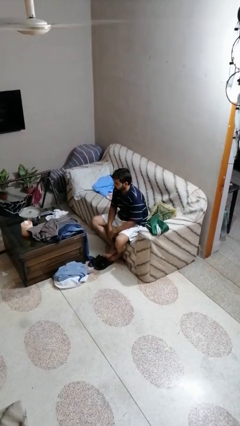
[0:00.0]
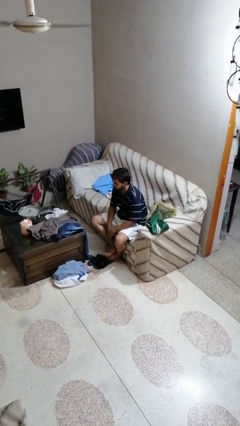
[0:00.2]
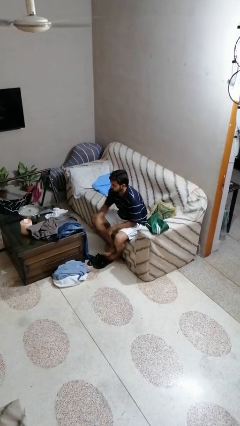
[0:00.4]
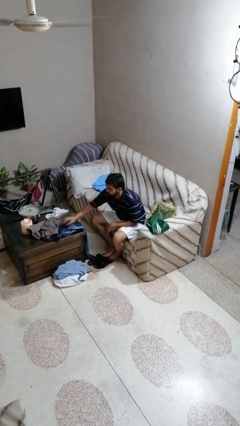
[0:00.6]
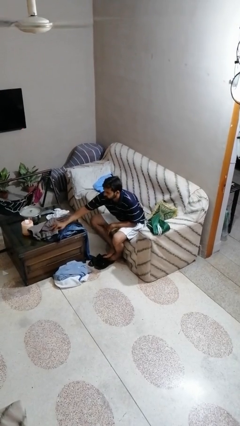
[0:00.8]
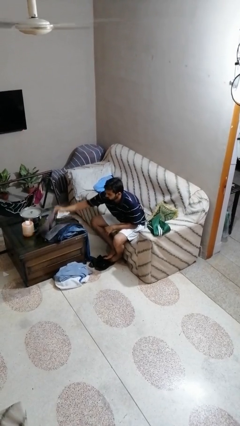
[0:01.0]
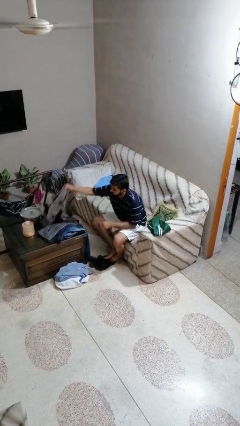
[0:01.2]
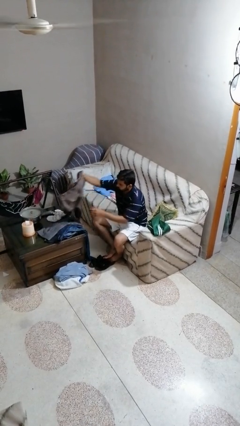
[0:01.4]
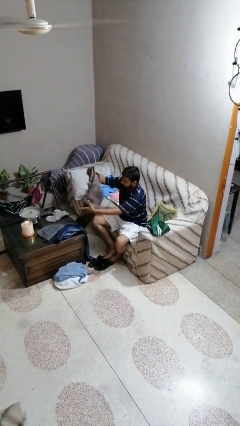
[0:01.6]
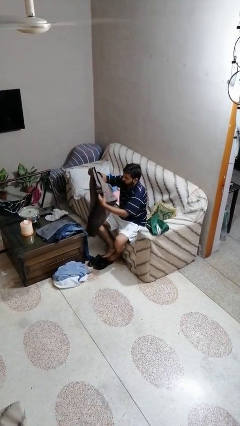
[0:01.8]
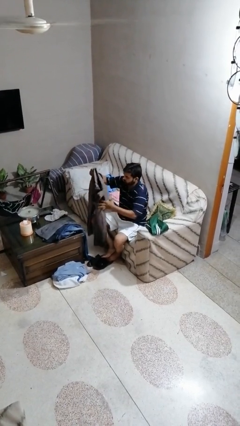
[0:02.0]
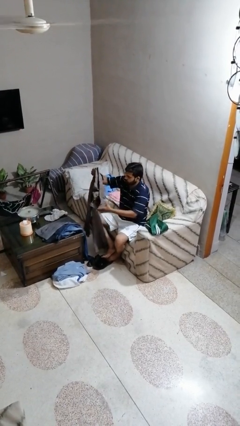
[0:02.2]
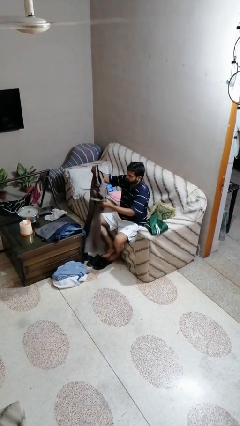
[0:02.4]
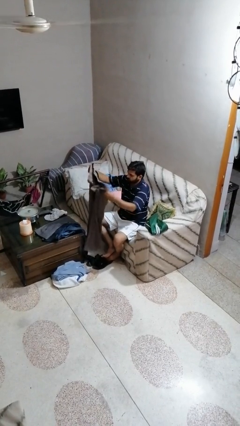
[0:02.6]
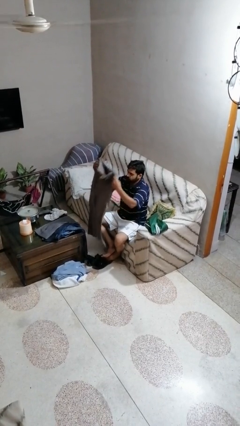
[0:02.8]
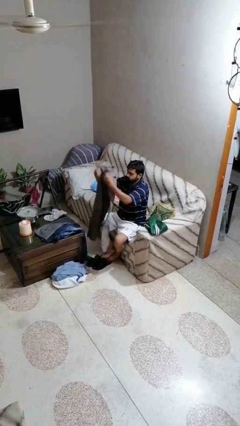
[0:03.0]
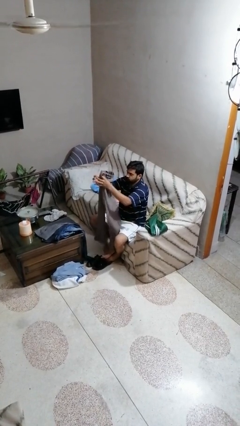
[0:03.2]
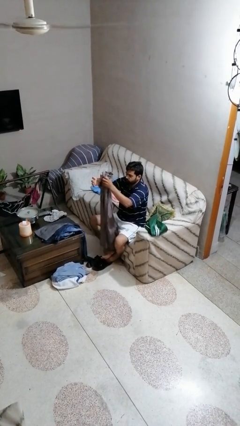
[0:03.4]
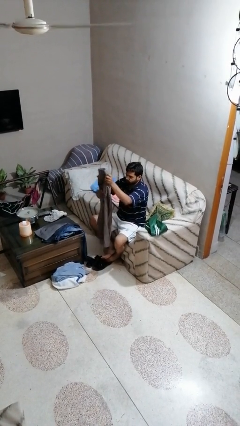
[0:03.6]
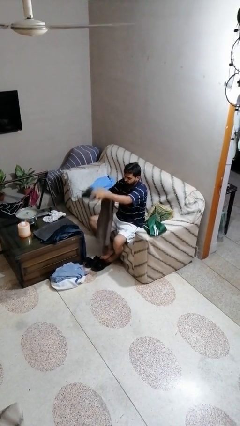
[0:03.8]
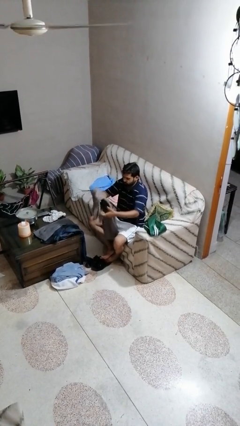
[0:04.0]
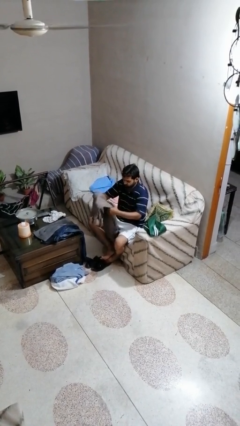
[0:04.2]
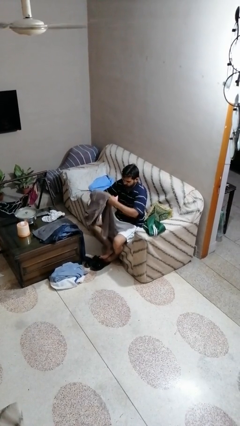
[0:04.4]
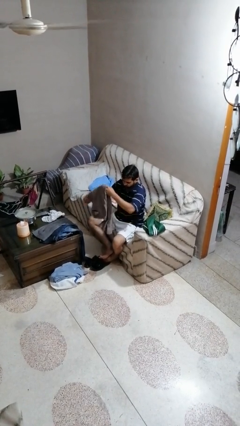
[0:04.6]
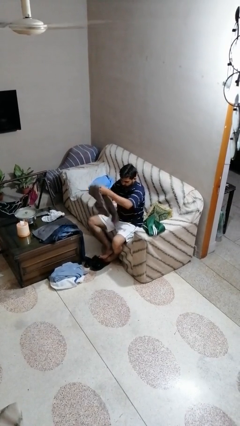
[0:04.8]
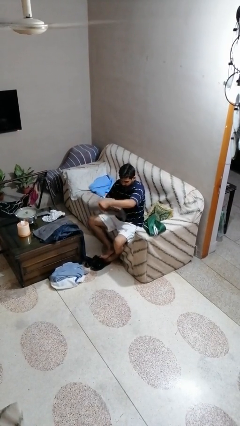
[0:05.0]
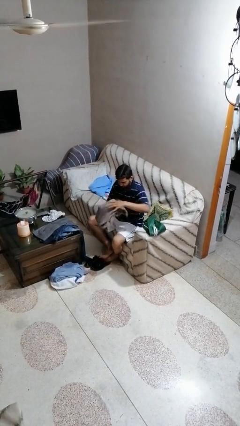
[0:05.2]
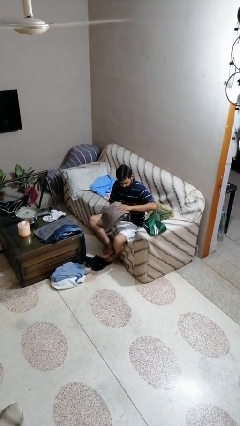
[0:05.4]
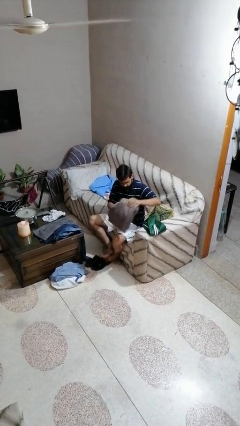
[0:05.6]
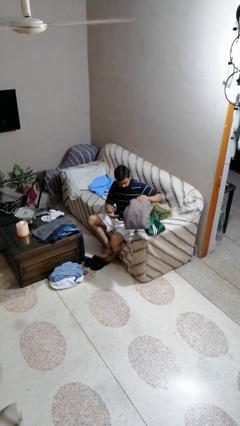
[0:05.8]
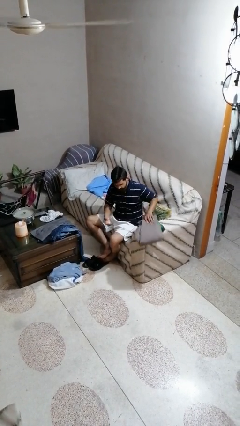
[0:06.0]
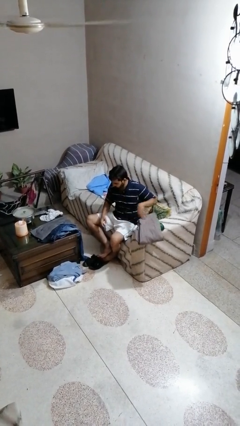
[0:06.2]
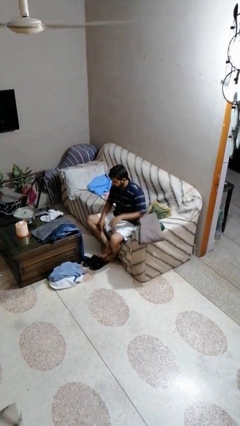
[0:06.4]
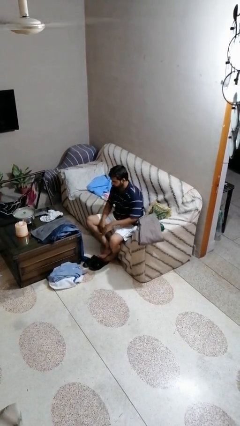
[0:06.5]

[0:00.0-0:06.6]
person folds pants

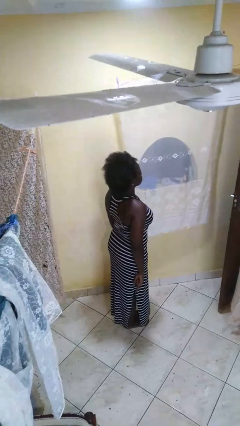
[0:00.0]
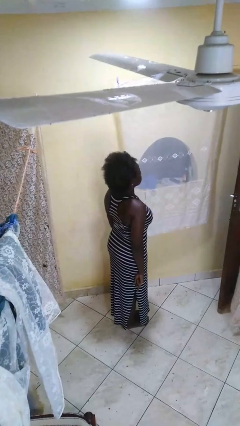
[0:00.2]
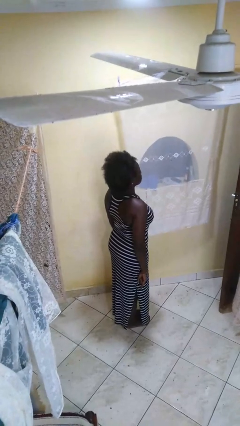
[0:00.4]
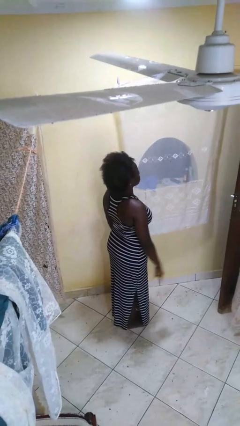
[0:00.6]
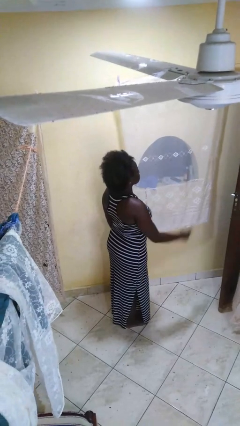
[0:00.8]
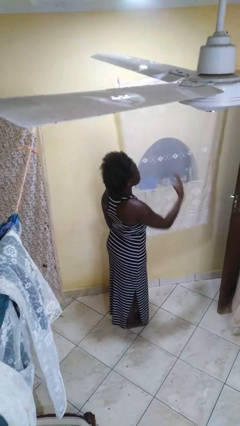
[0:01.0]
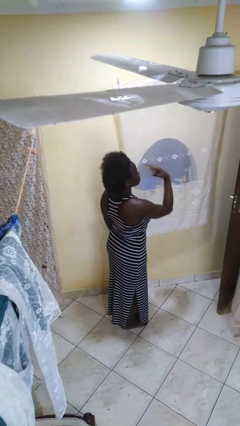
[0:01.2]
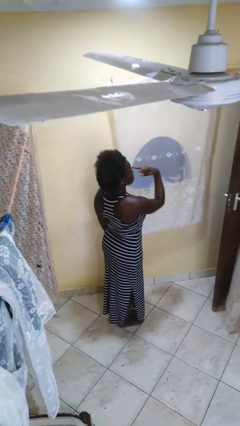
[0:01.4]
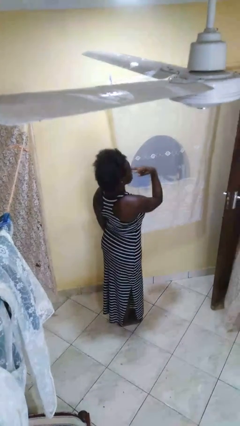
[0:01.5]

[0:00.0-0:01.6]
person gestures watch closely

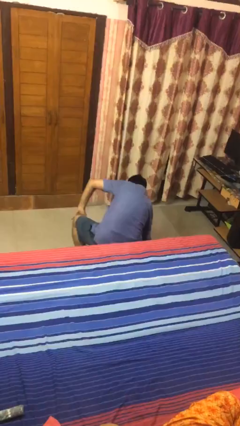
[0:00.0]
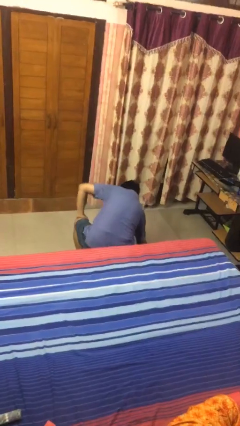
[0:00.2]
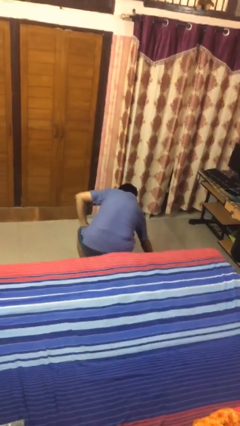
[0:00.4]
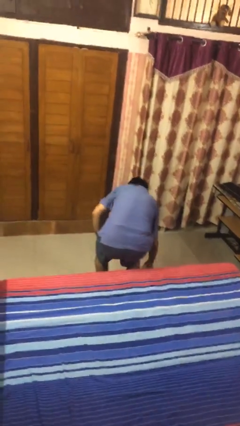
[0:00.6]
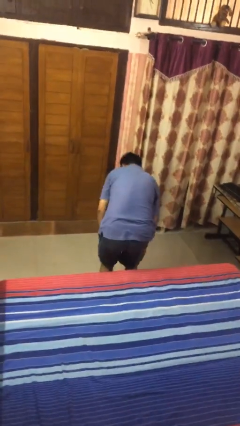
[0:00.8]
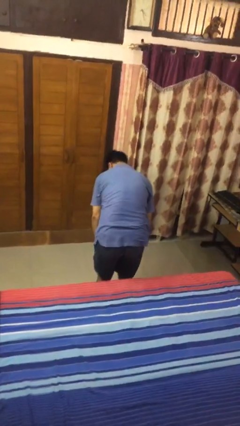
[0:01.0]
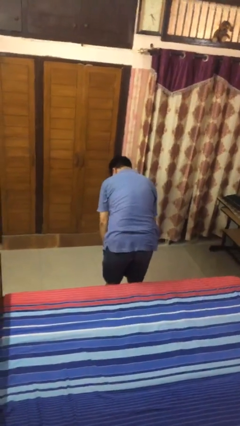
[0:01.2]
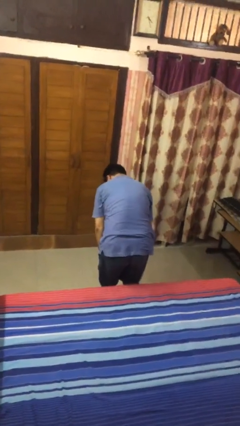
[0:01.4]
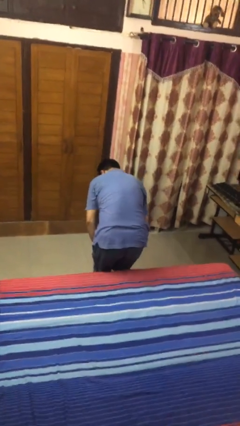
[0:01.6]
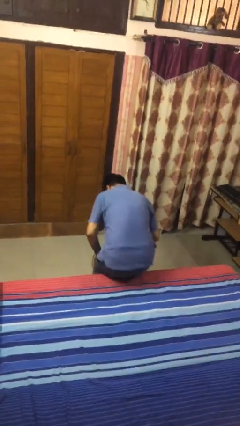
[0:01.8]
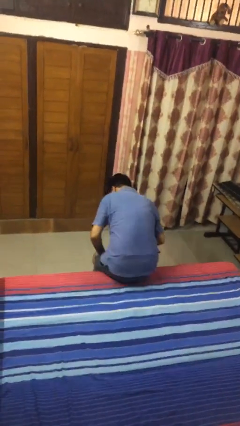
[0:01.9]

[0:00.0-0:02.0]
person stands up from floor

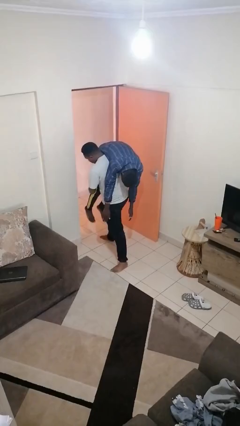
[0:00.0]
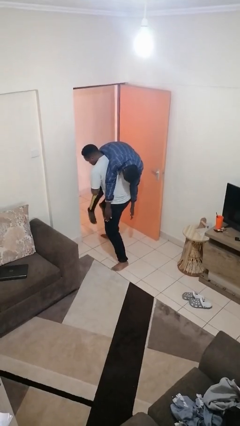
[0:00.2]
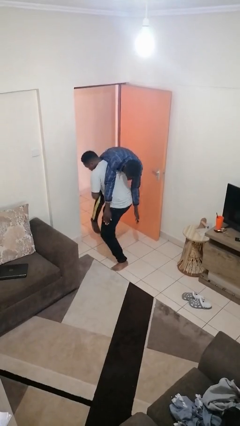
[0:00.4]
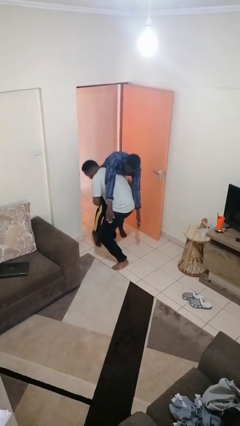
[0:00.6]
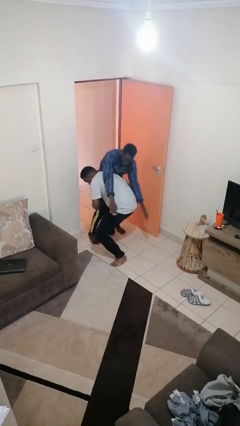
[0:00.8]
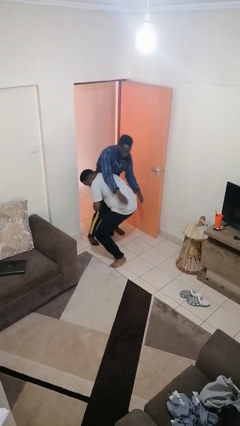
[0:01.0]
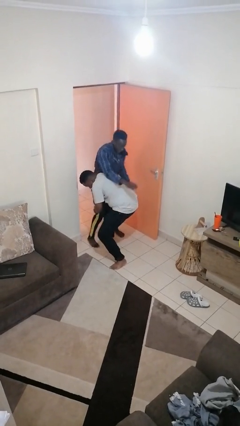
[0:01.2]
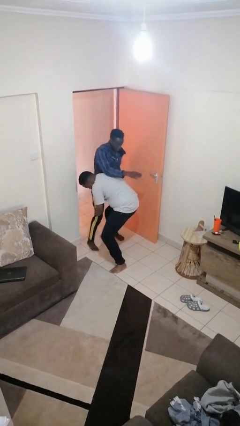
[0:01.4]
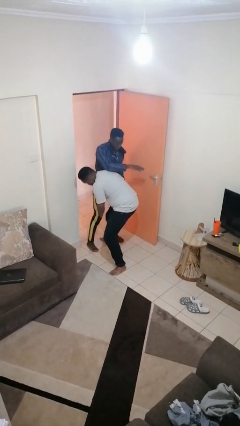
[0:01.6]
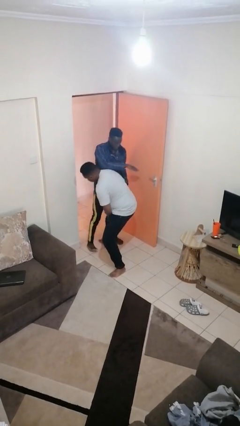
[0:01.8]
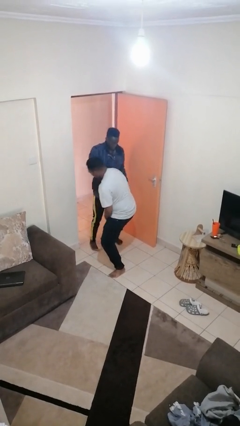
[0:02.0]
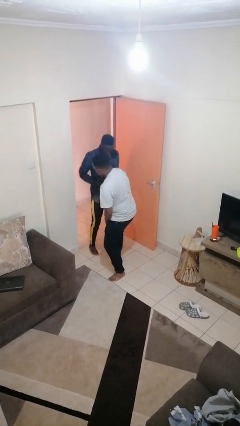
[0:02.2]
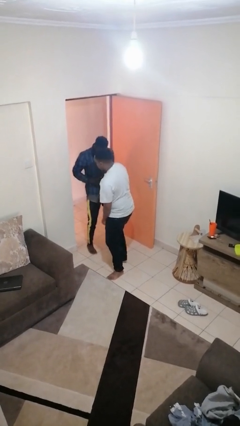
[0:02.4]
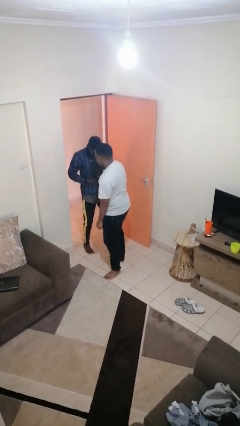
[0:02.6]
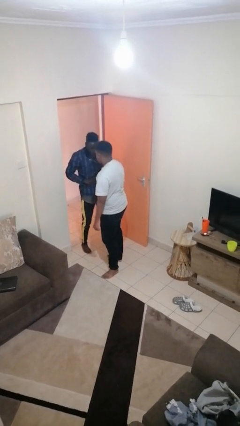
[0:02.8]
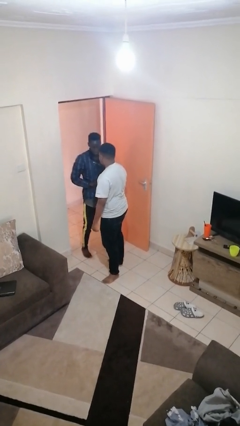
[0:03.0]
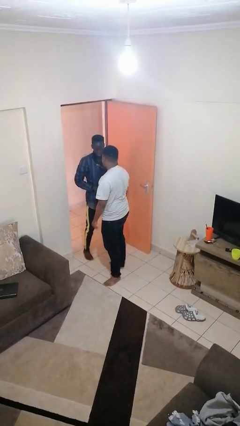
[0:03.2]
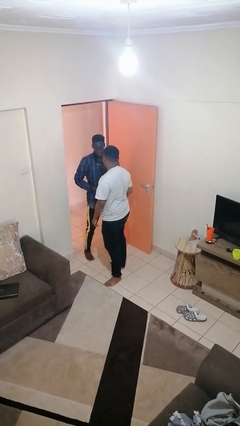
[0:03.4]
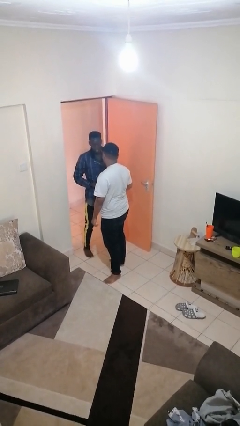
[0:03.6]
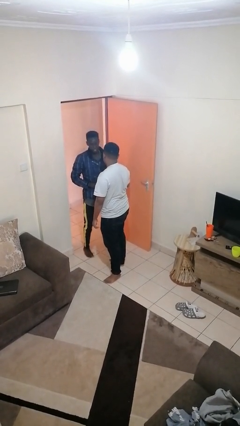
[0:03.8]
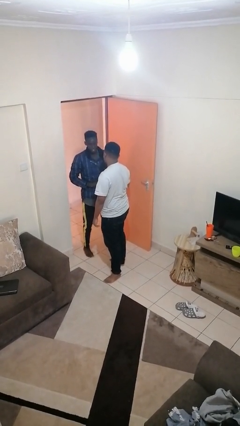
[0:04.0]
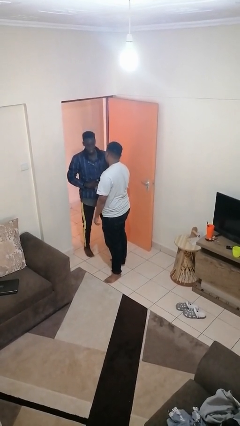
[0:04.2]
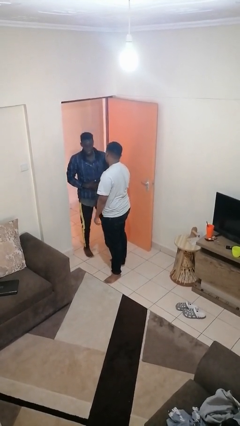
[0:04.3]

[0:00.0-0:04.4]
person puts down person

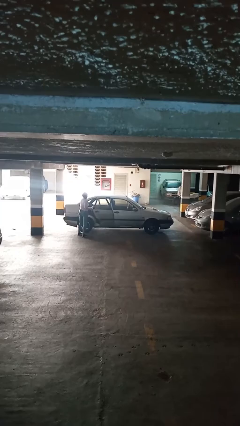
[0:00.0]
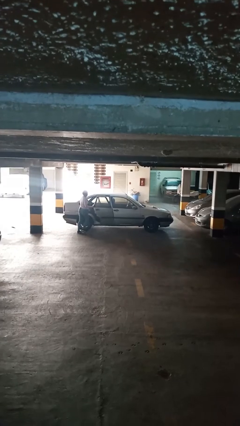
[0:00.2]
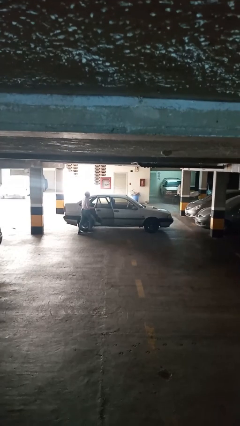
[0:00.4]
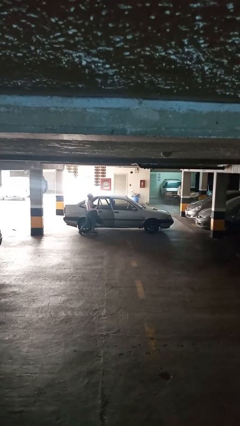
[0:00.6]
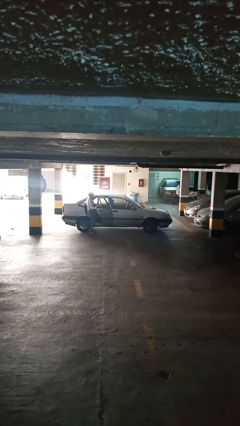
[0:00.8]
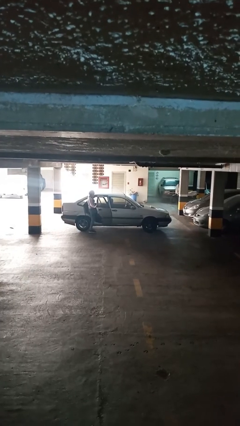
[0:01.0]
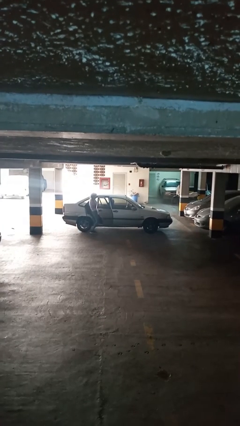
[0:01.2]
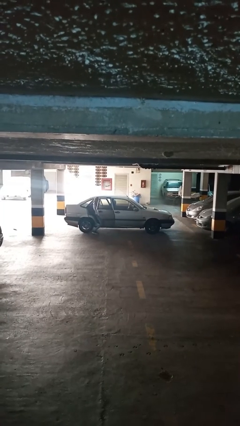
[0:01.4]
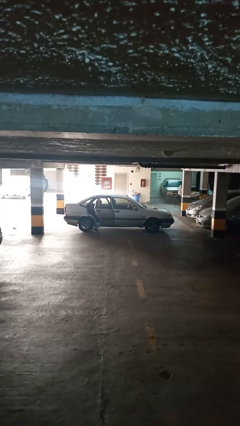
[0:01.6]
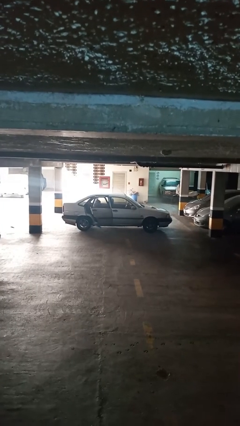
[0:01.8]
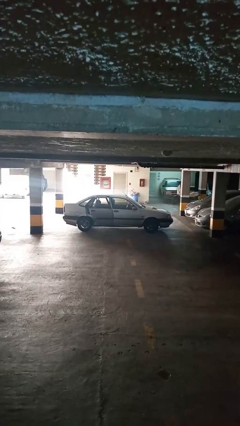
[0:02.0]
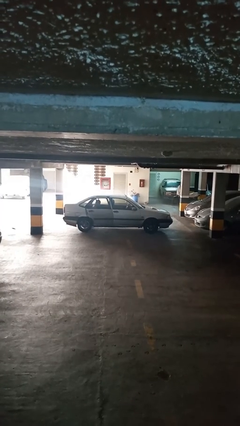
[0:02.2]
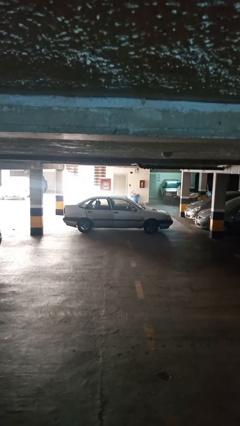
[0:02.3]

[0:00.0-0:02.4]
car picks up person

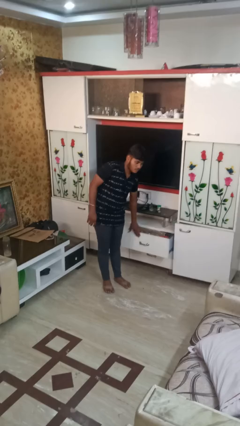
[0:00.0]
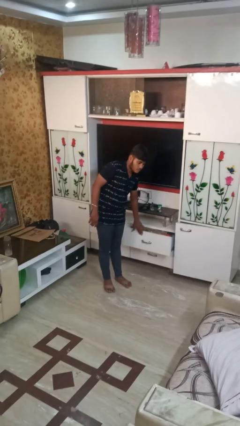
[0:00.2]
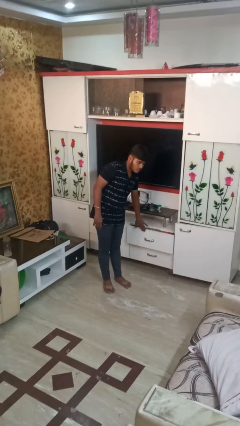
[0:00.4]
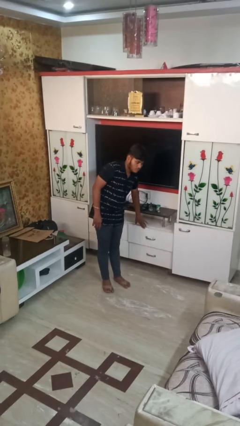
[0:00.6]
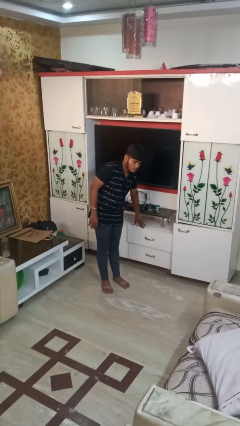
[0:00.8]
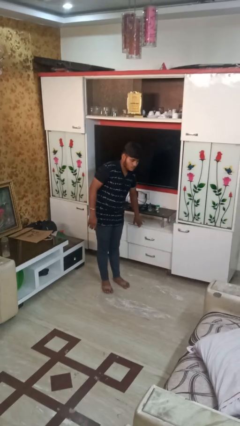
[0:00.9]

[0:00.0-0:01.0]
person closes dresser drawer
